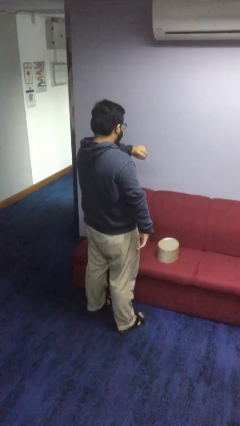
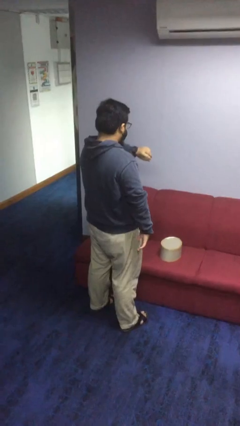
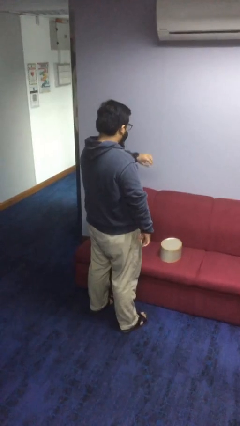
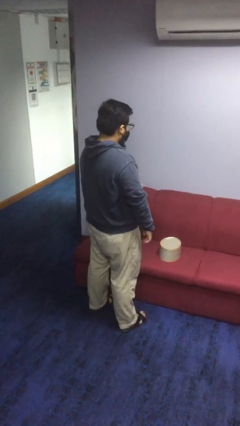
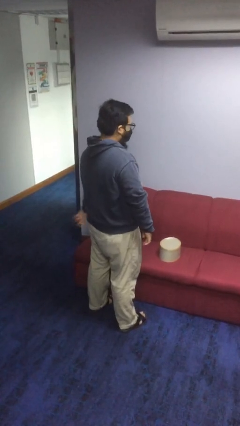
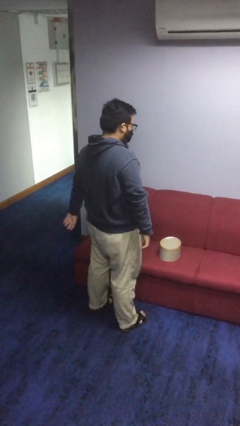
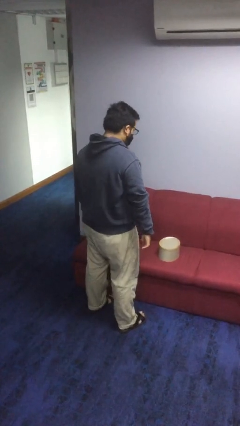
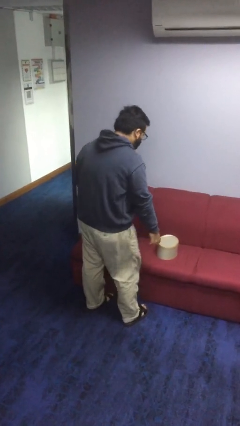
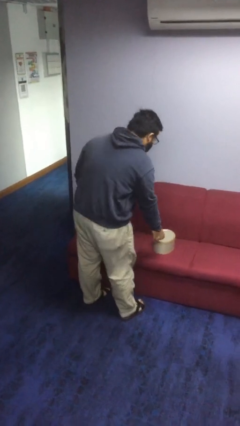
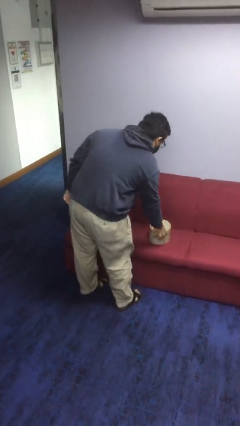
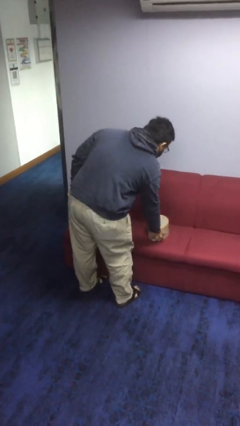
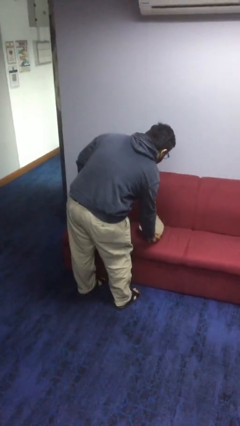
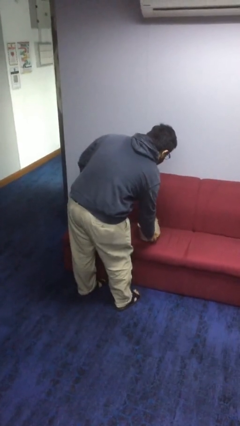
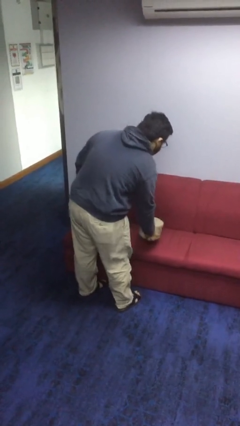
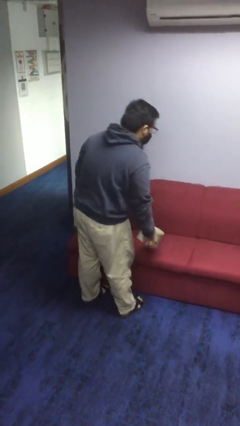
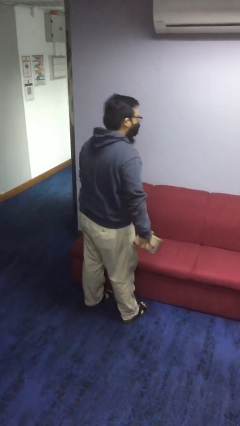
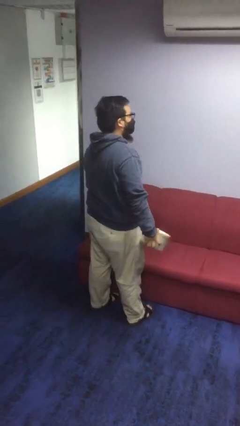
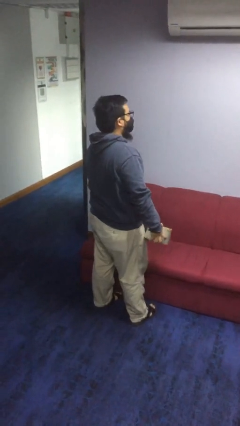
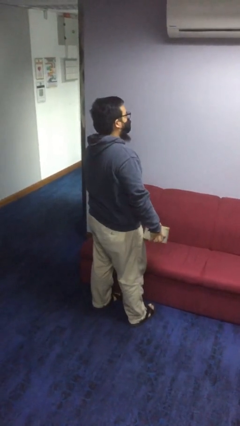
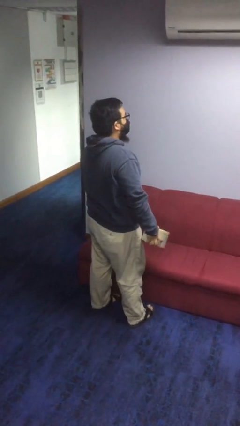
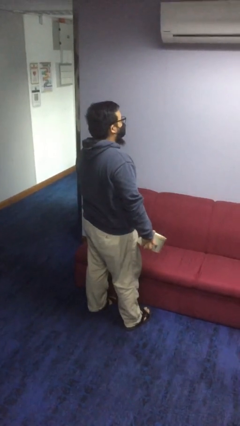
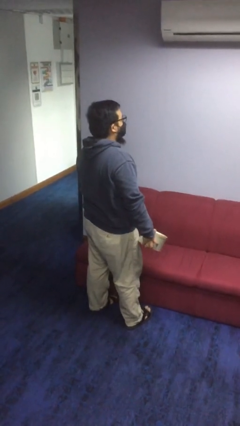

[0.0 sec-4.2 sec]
person picks up object from couch

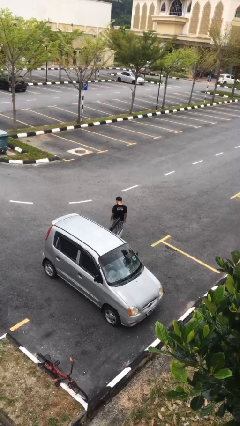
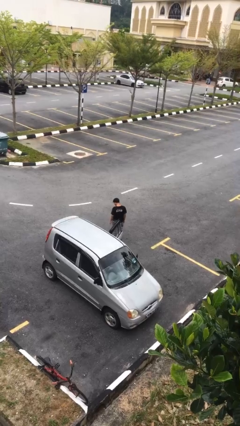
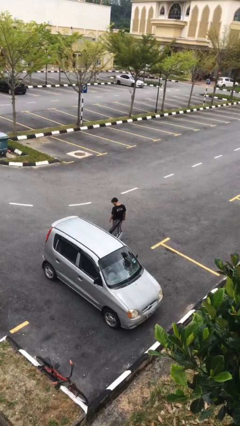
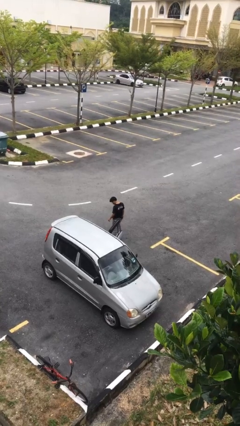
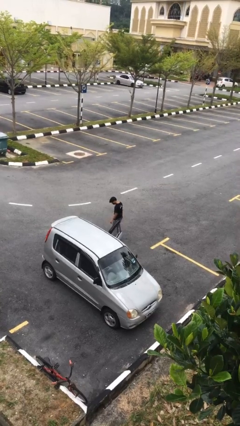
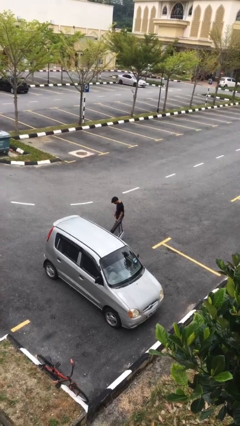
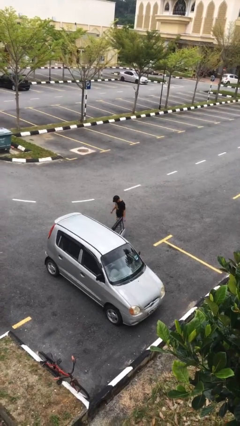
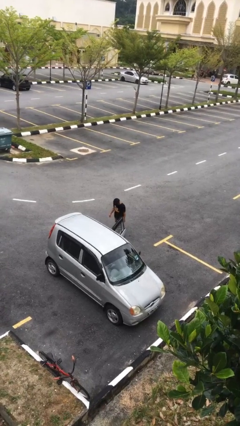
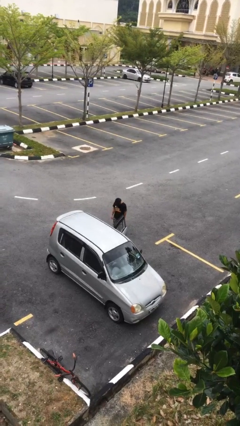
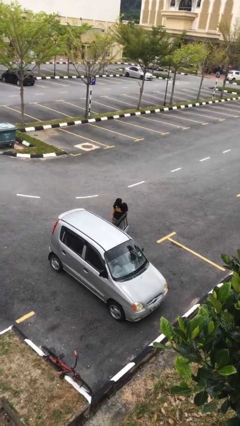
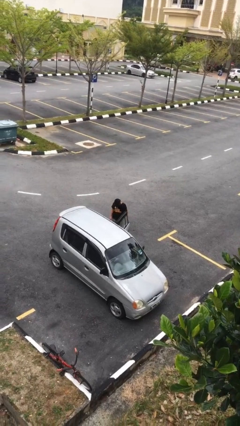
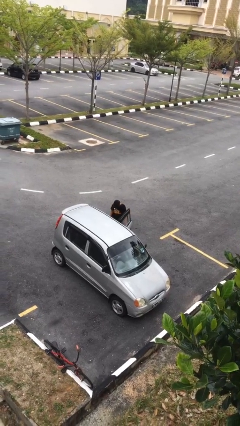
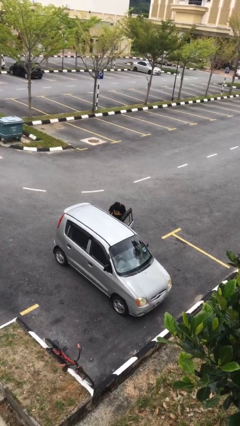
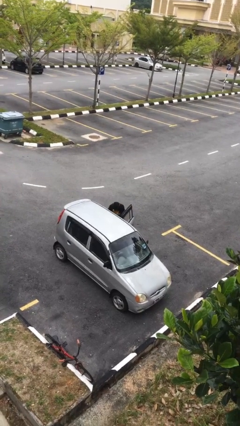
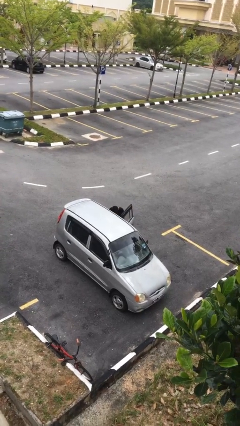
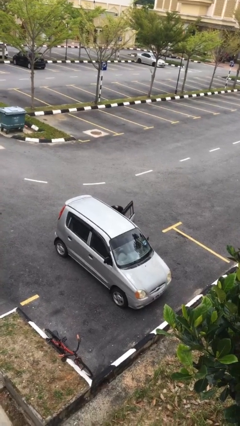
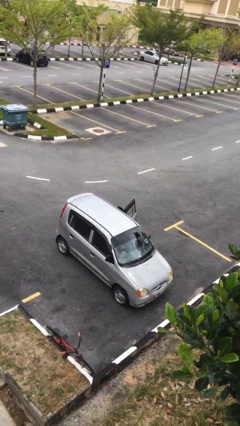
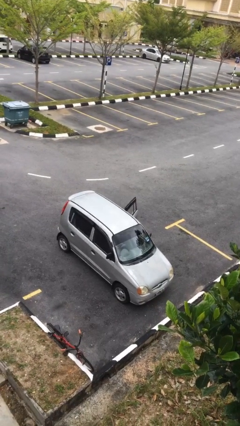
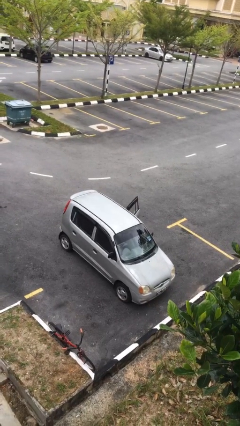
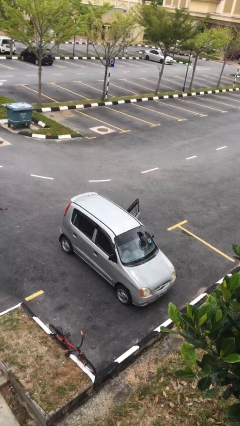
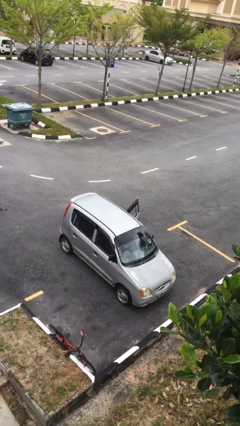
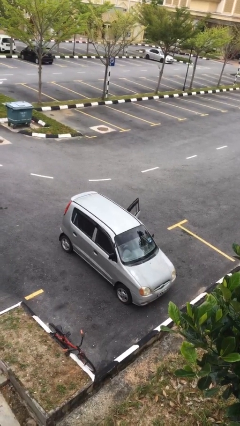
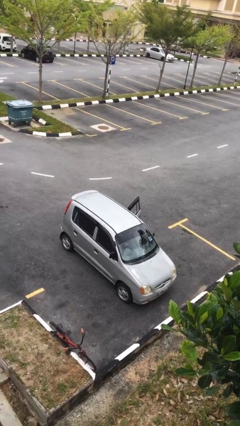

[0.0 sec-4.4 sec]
person enters car

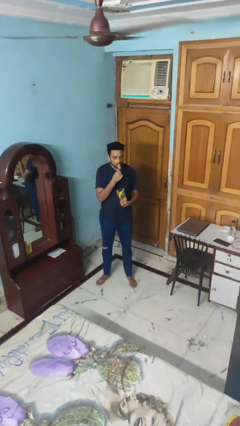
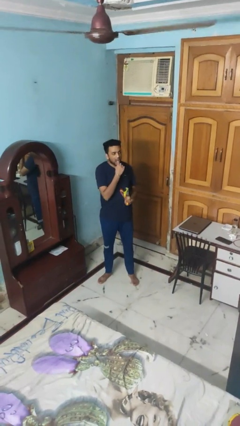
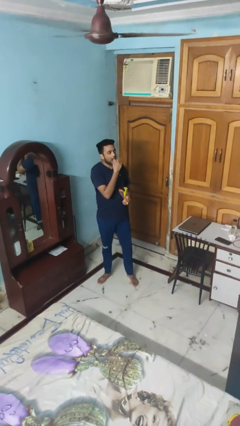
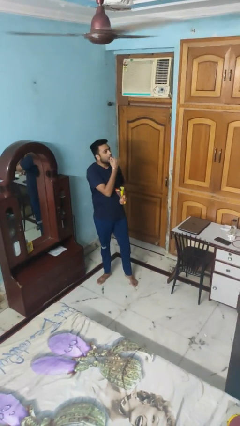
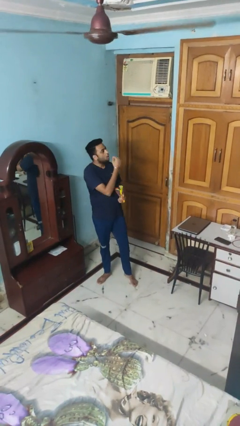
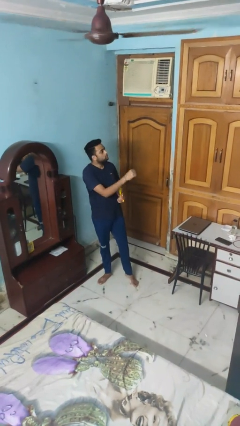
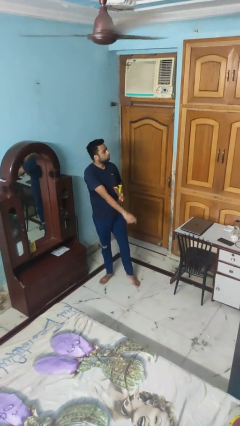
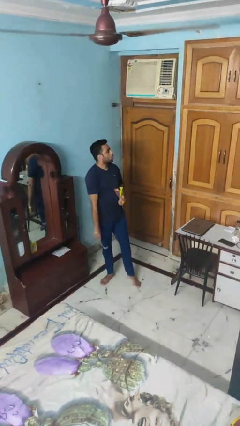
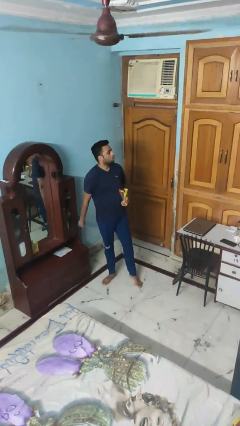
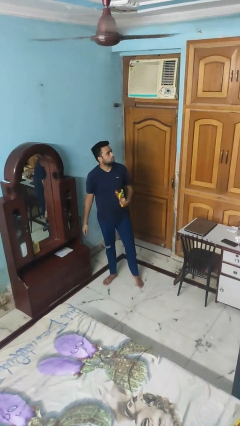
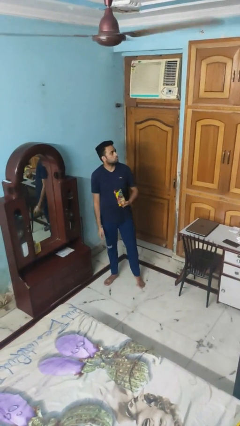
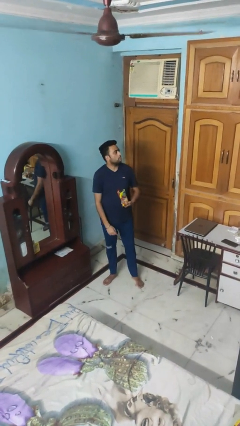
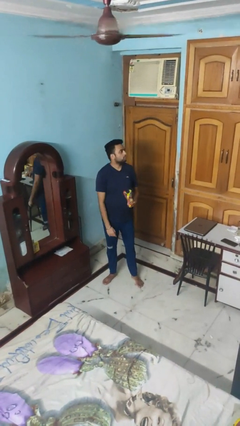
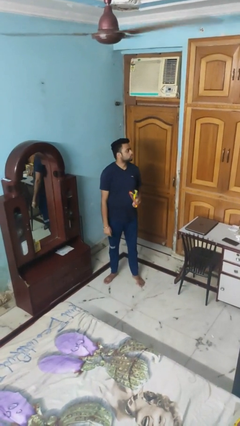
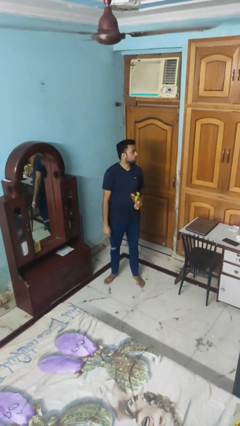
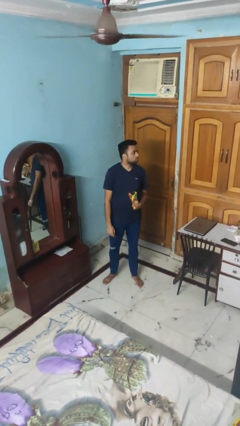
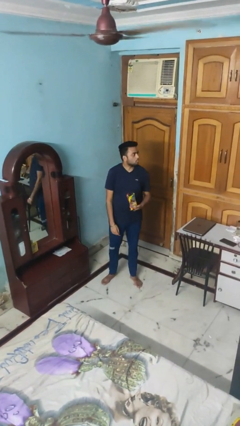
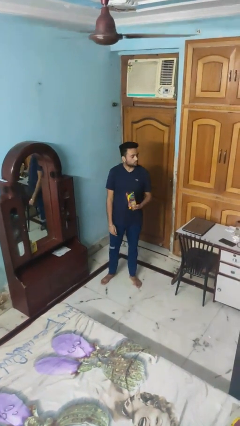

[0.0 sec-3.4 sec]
person eats snack from bag

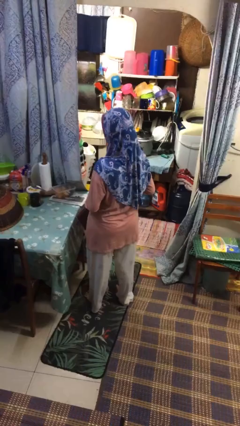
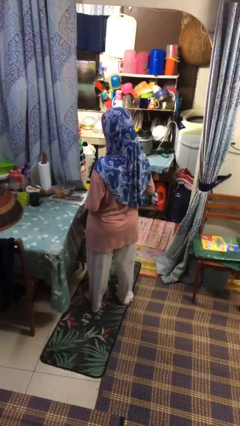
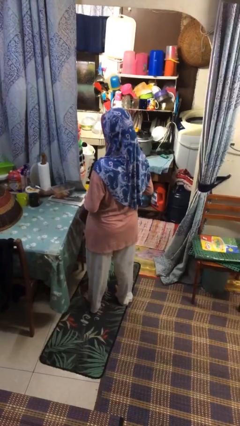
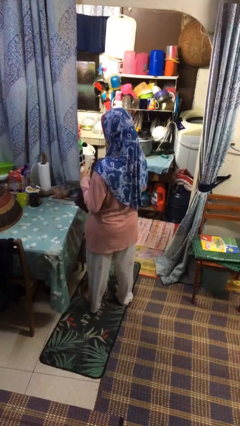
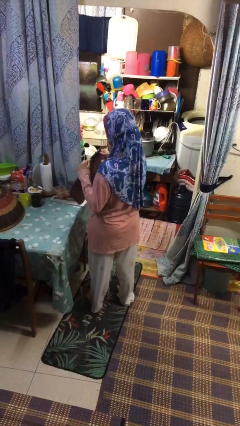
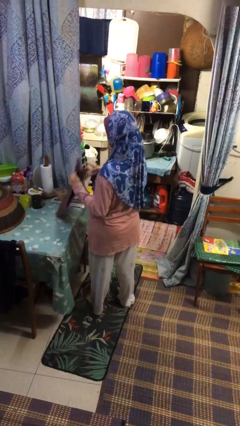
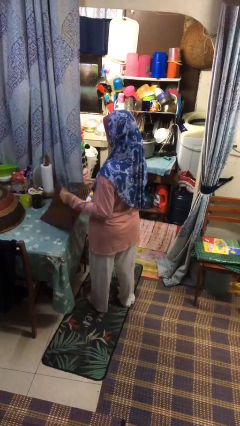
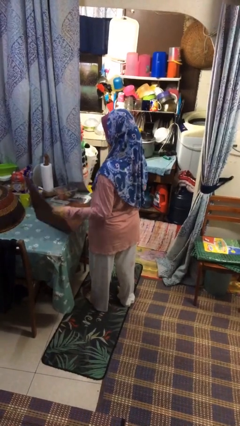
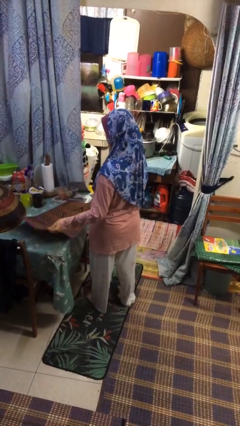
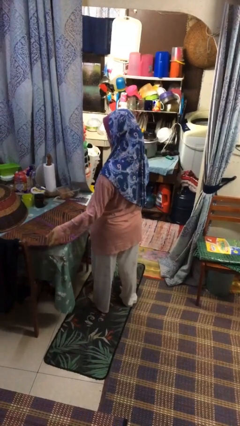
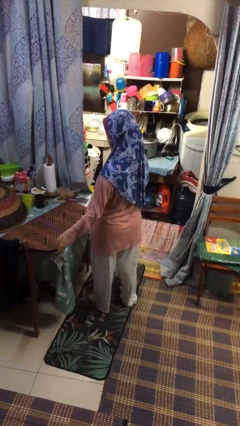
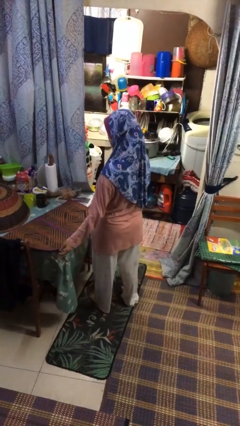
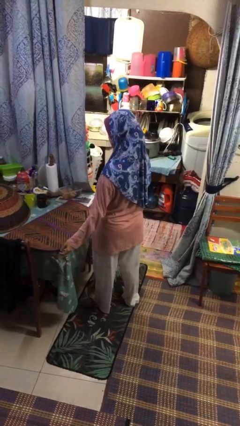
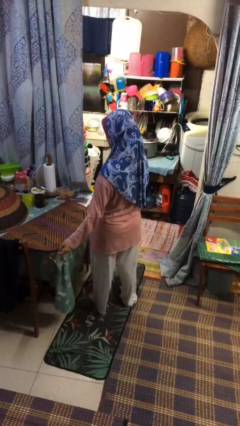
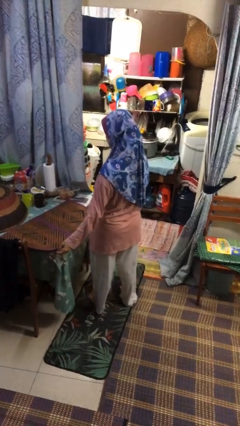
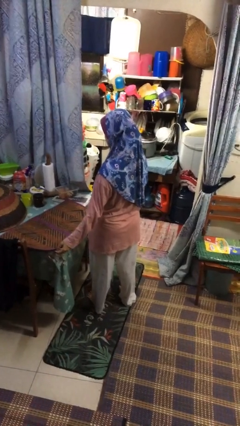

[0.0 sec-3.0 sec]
person spreads tablecloth

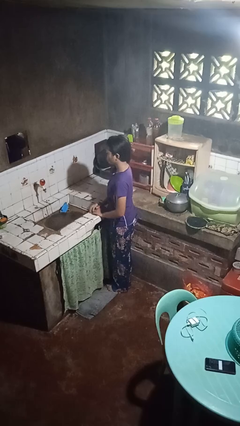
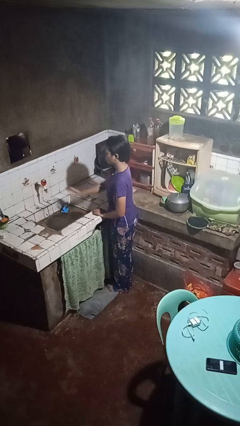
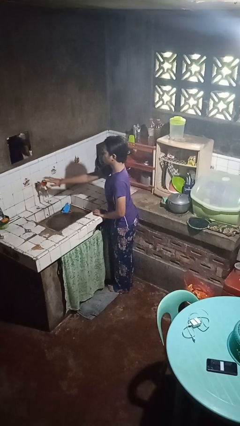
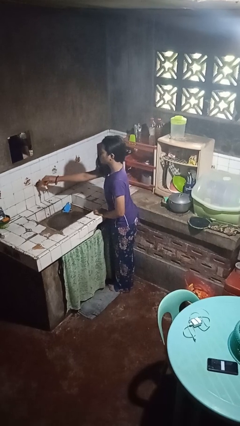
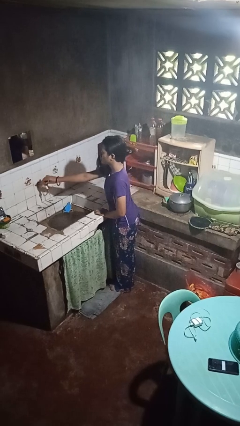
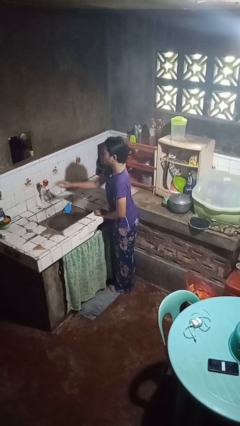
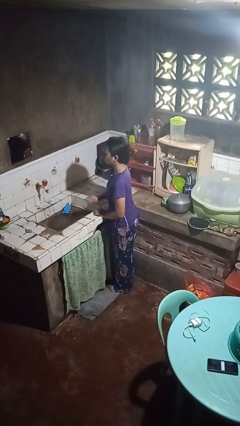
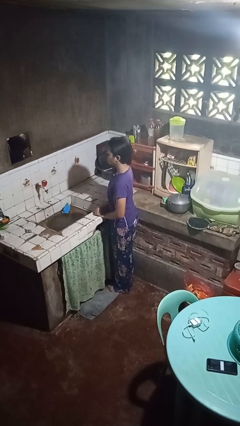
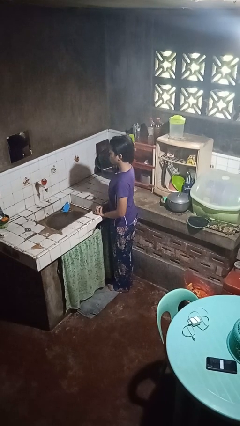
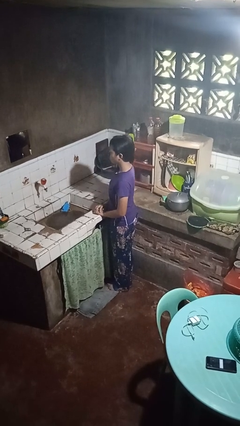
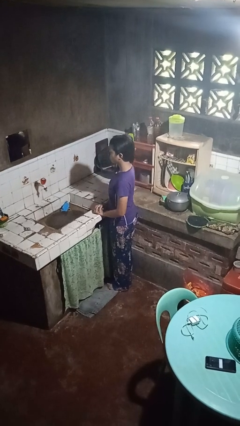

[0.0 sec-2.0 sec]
person turns off faucet

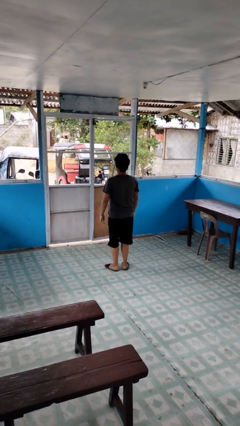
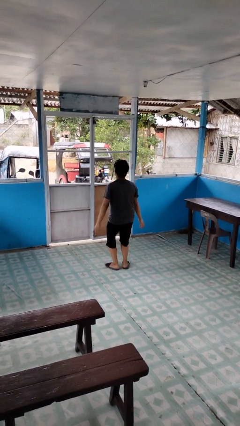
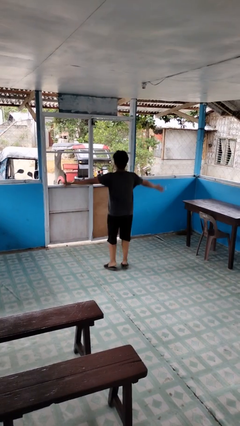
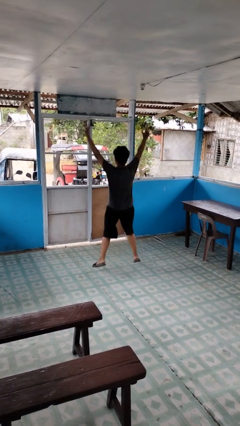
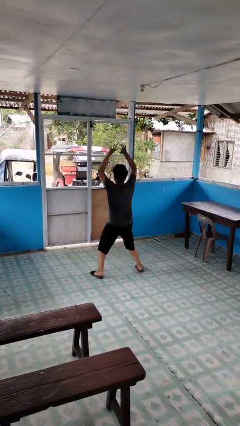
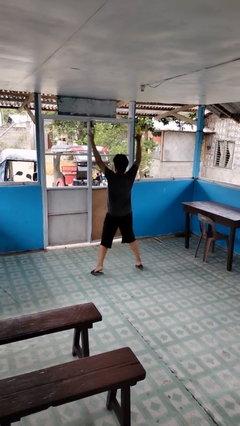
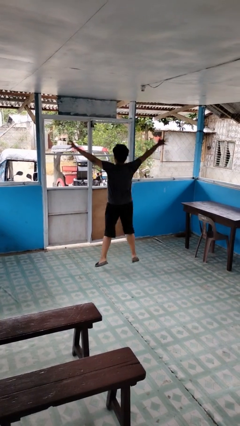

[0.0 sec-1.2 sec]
person exercises with jumping jacks
